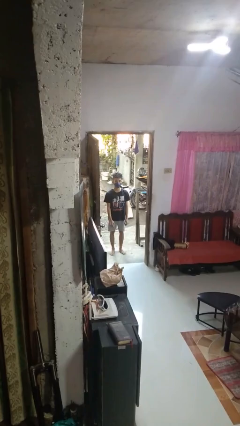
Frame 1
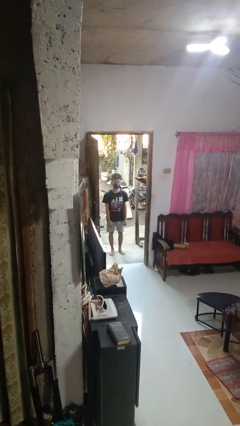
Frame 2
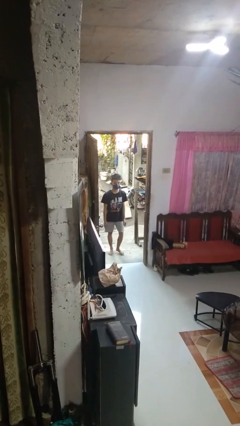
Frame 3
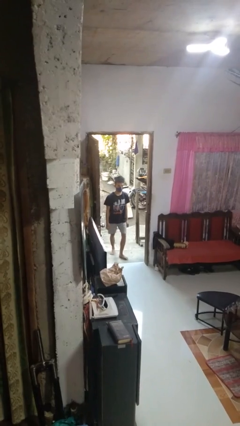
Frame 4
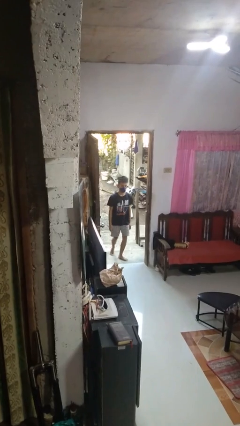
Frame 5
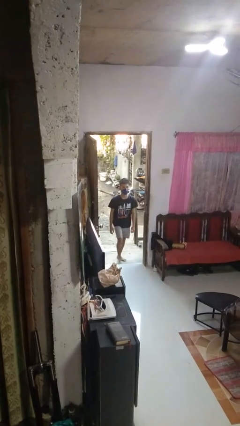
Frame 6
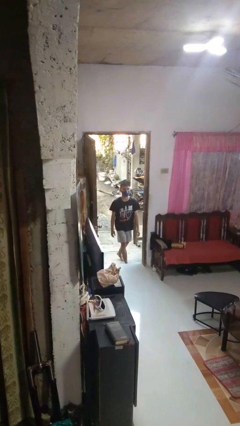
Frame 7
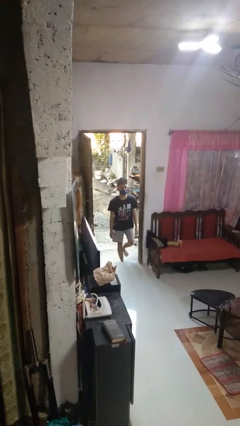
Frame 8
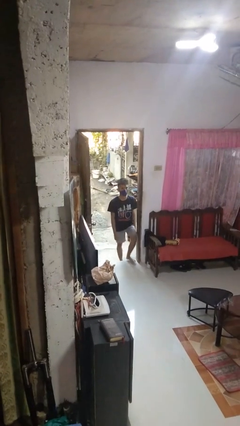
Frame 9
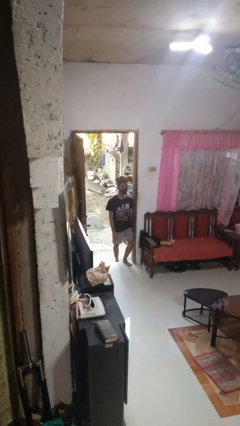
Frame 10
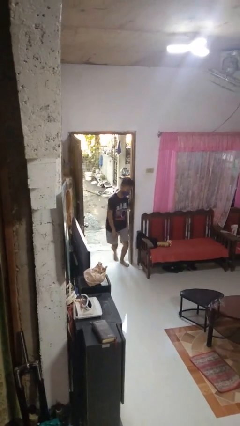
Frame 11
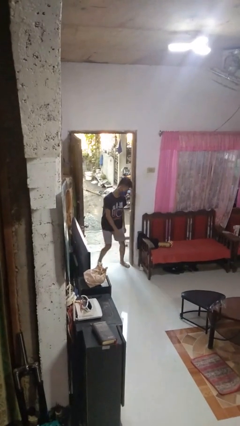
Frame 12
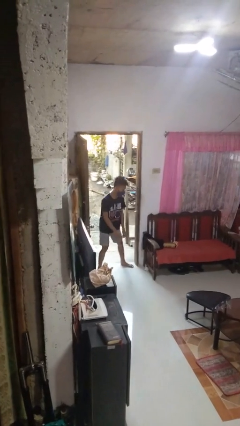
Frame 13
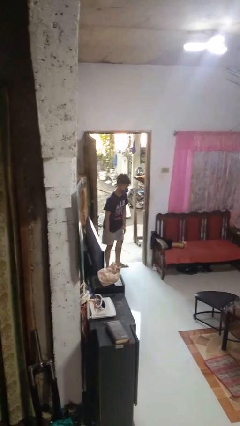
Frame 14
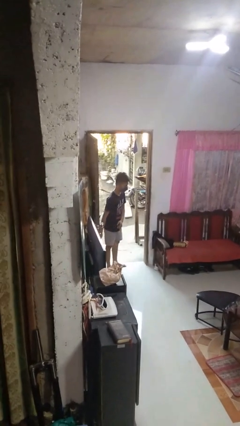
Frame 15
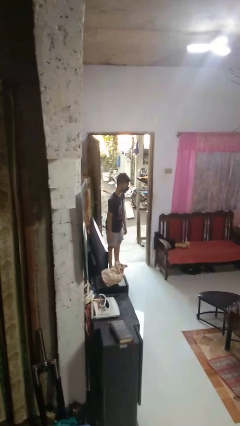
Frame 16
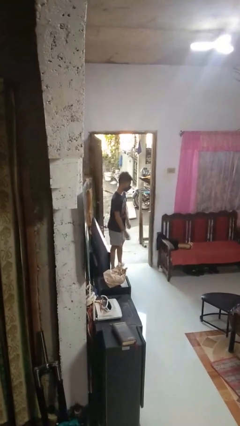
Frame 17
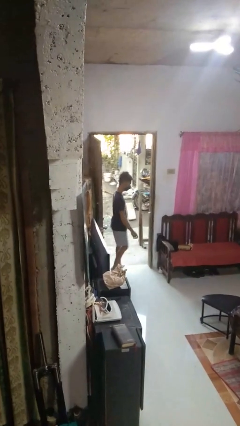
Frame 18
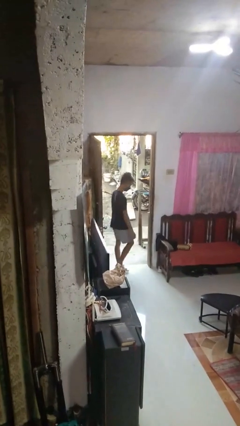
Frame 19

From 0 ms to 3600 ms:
person bumps into wall

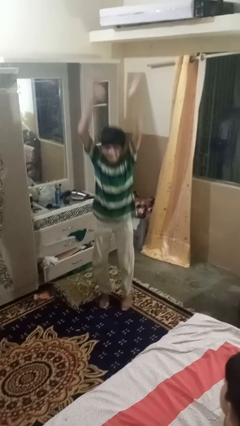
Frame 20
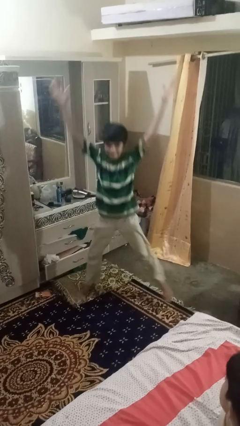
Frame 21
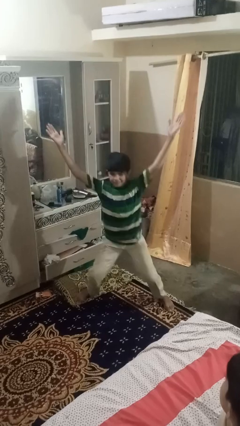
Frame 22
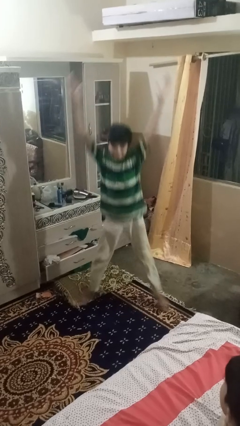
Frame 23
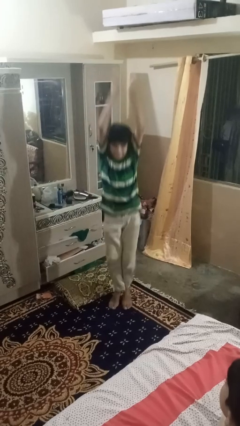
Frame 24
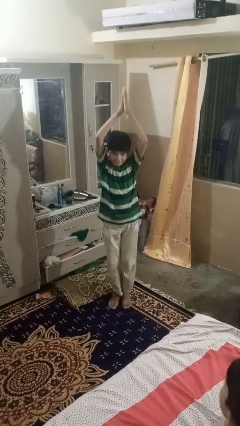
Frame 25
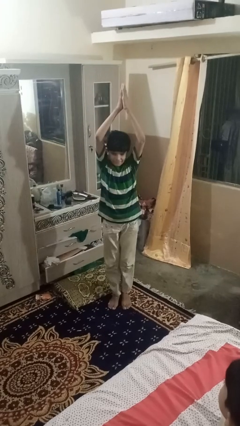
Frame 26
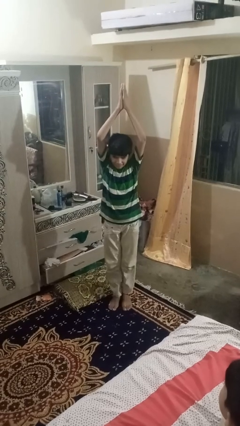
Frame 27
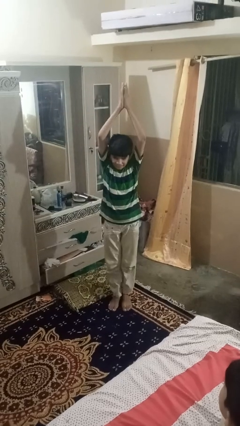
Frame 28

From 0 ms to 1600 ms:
person exercises with jumping jacks

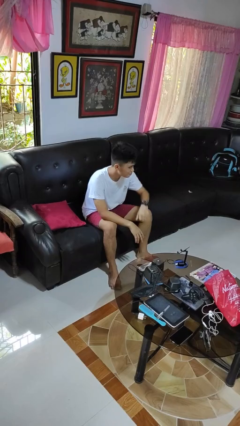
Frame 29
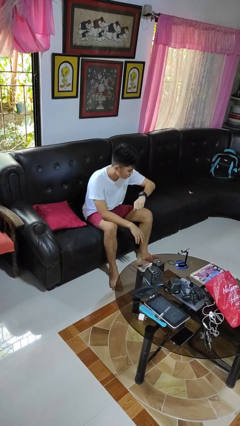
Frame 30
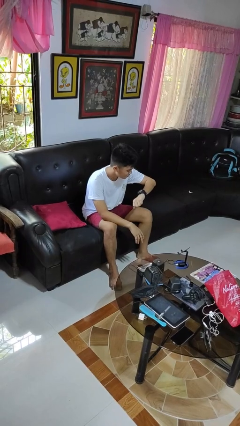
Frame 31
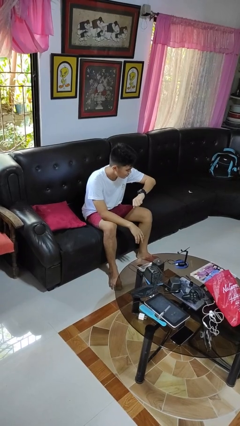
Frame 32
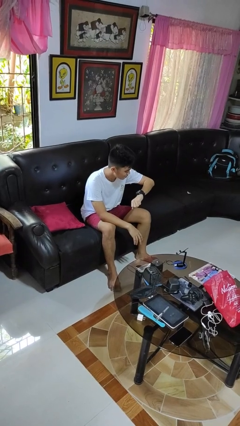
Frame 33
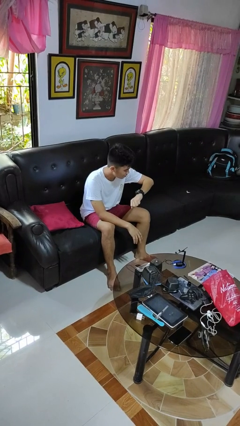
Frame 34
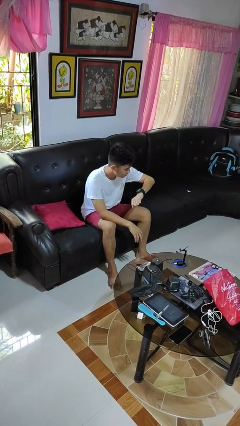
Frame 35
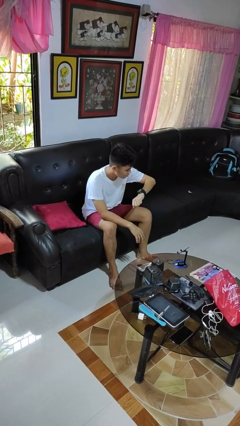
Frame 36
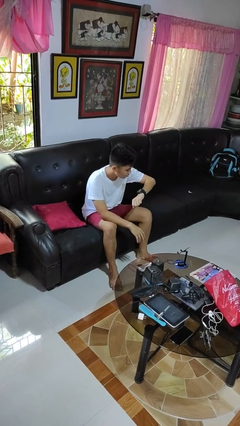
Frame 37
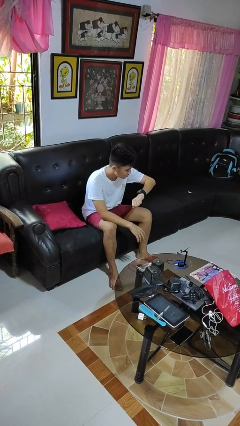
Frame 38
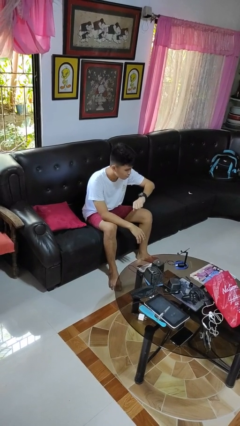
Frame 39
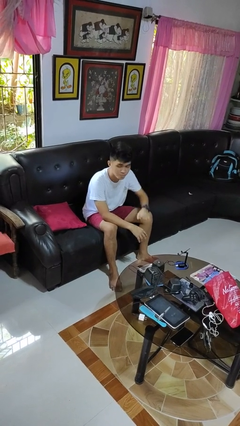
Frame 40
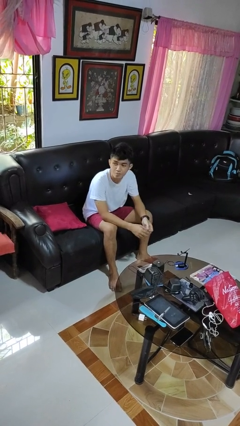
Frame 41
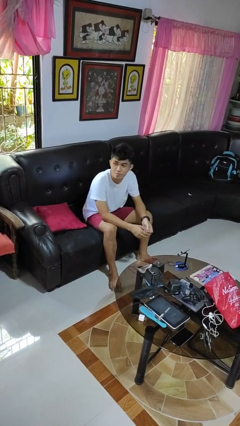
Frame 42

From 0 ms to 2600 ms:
person looks at wristwatch

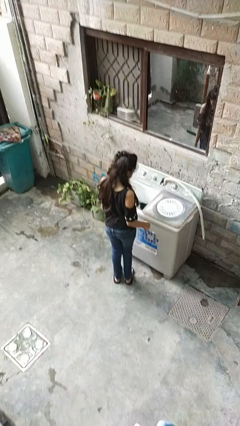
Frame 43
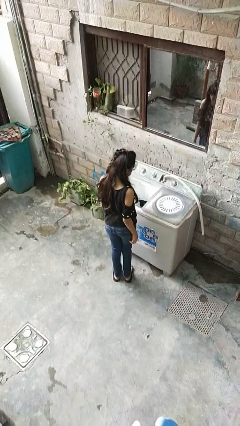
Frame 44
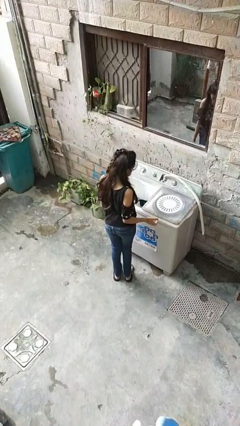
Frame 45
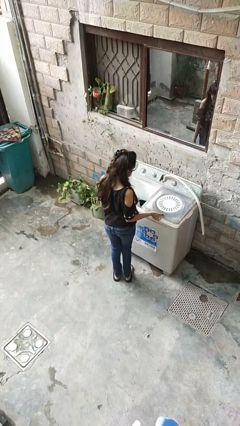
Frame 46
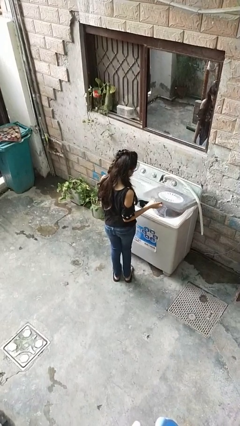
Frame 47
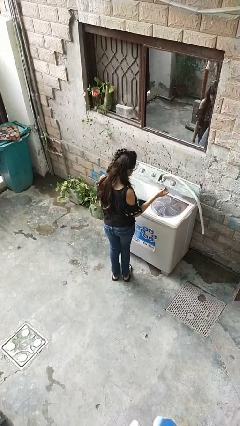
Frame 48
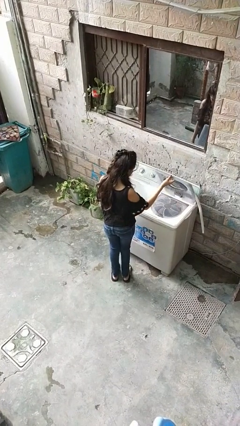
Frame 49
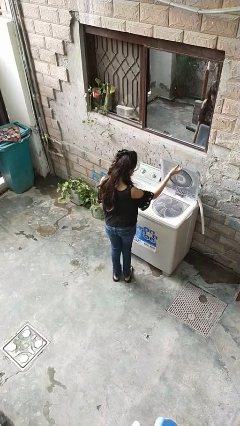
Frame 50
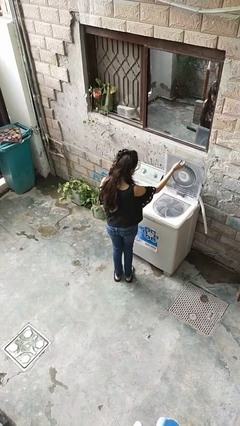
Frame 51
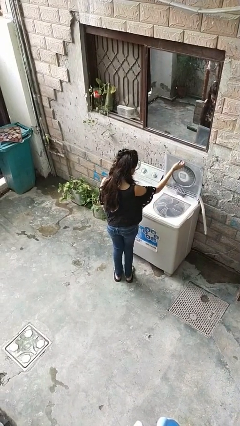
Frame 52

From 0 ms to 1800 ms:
person opens clothes washer

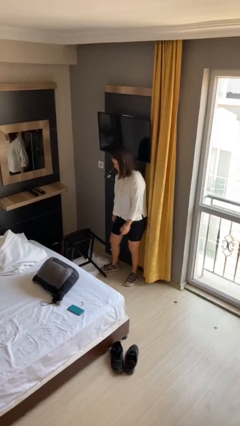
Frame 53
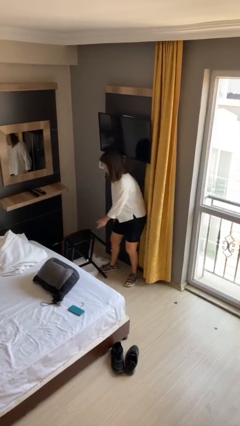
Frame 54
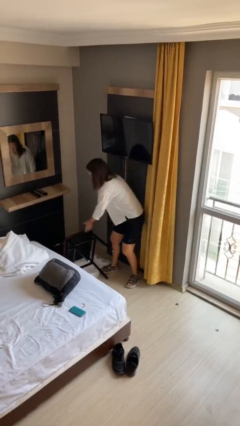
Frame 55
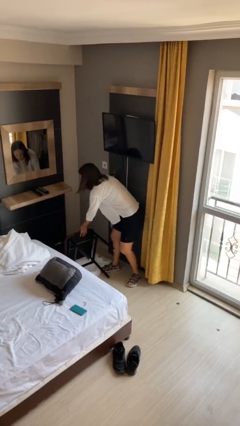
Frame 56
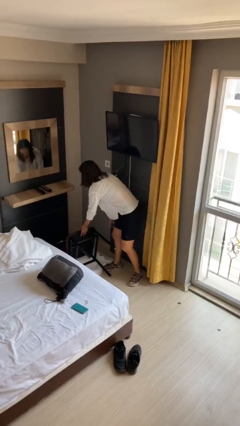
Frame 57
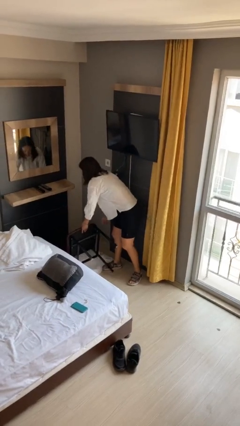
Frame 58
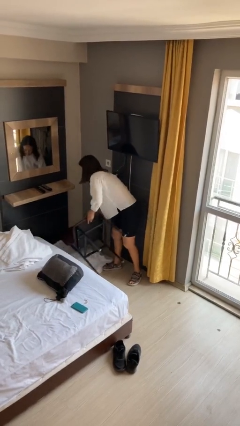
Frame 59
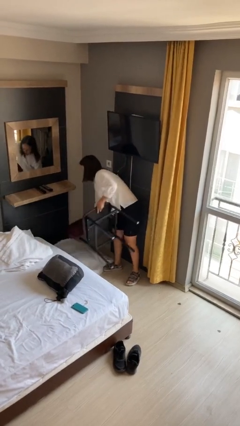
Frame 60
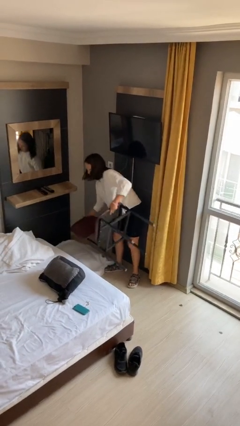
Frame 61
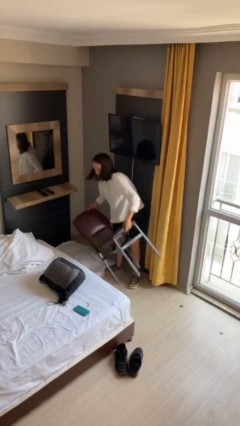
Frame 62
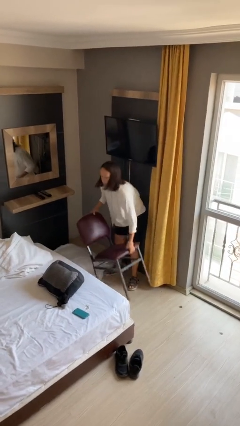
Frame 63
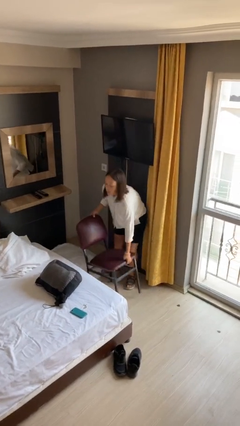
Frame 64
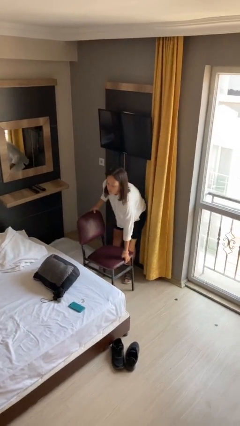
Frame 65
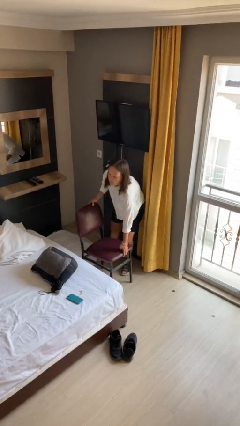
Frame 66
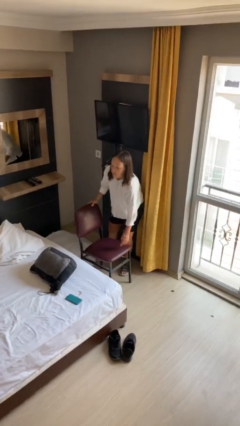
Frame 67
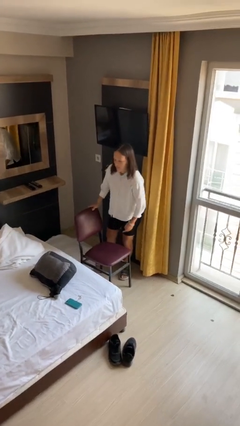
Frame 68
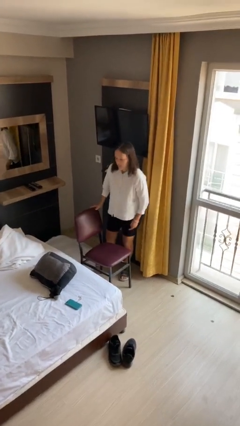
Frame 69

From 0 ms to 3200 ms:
person sets upright furniture

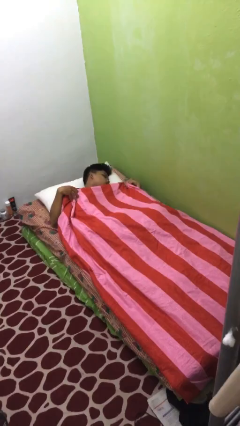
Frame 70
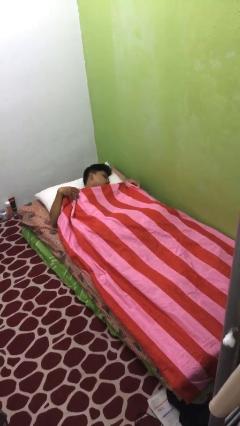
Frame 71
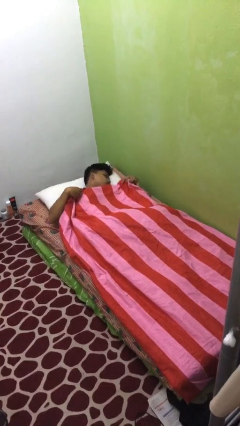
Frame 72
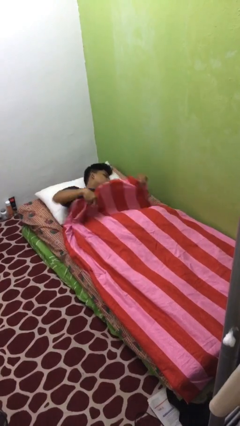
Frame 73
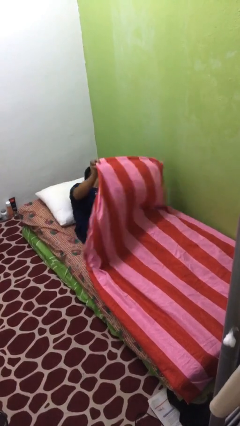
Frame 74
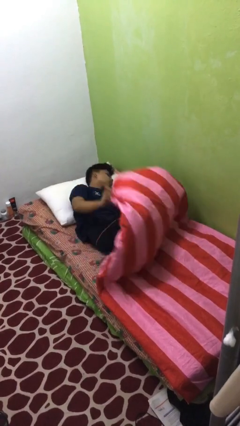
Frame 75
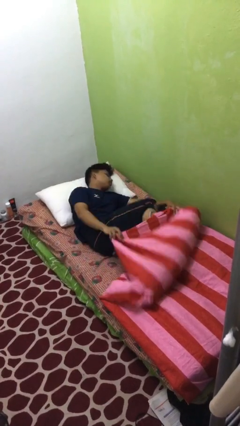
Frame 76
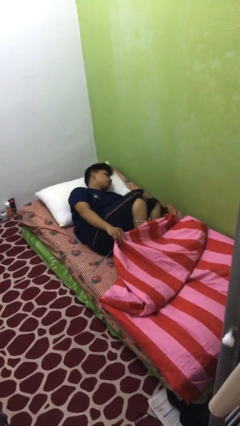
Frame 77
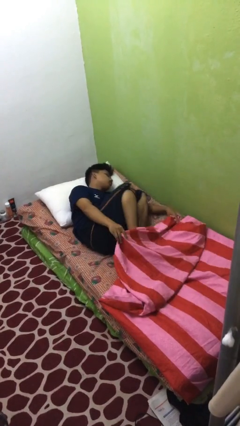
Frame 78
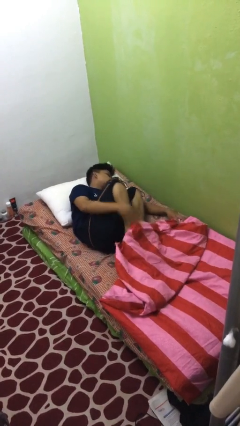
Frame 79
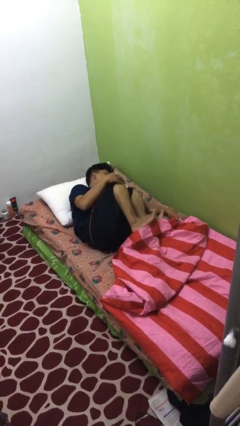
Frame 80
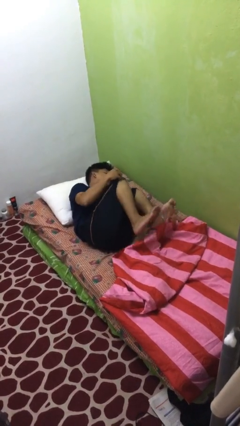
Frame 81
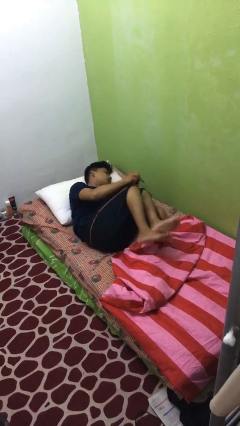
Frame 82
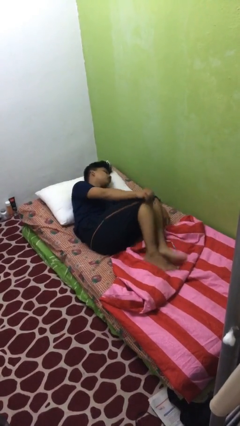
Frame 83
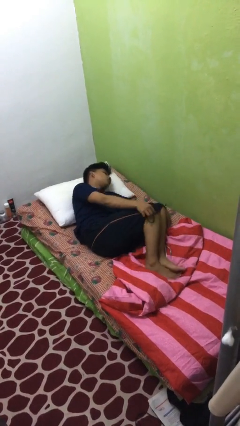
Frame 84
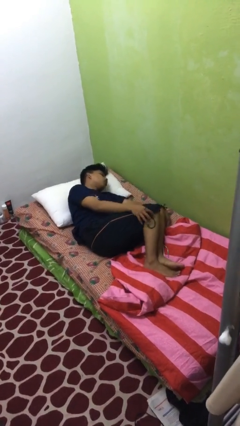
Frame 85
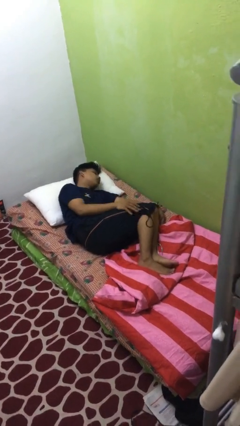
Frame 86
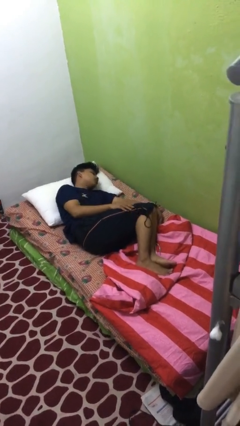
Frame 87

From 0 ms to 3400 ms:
person uncovers with bedsheets

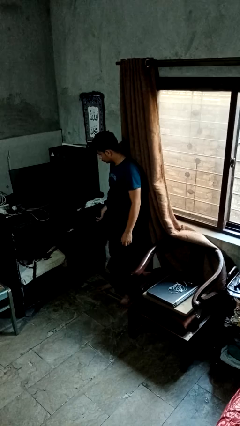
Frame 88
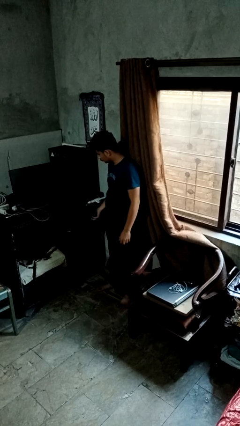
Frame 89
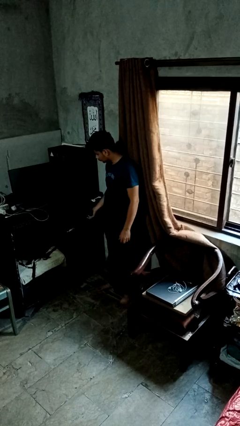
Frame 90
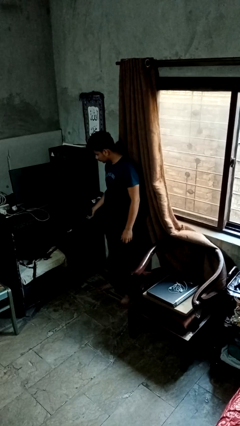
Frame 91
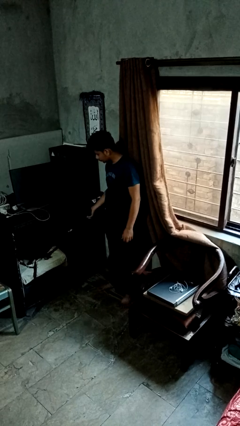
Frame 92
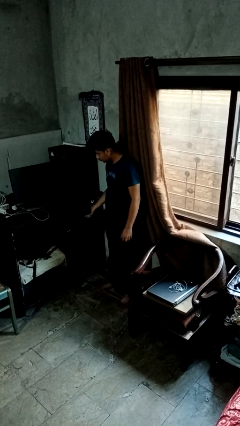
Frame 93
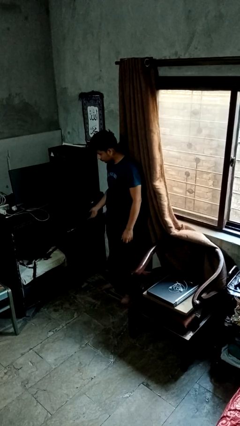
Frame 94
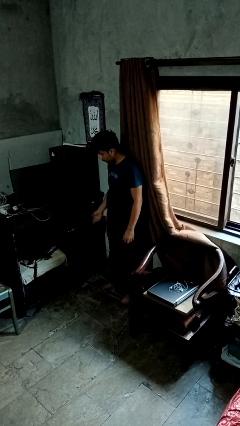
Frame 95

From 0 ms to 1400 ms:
person closes dresser drawer
